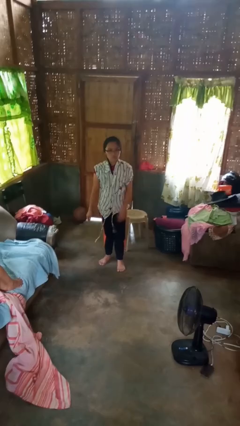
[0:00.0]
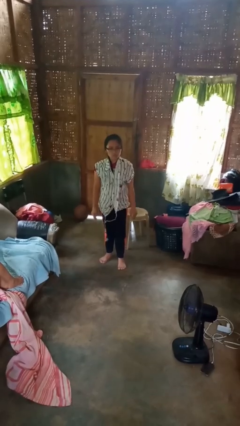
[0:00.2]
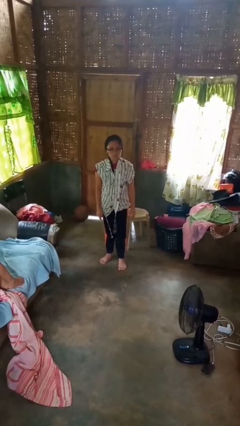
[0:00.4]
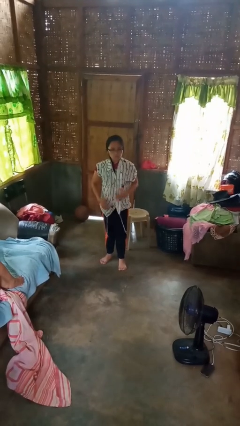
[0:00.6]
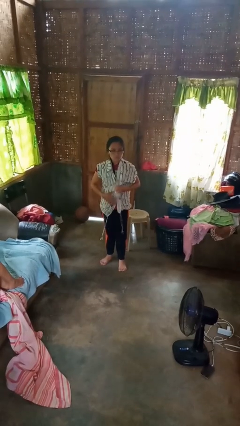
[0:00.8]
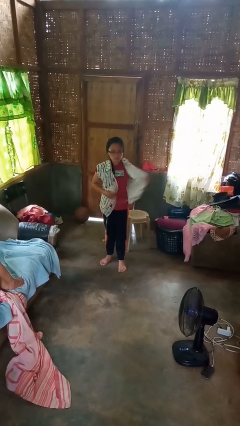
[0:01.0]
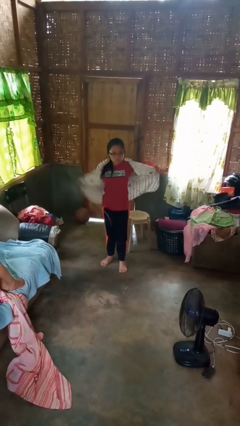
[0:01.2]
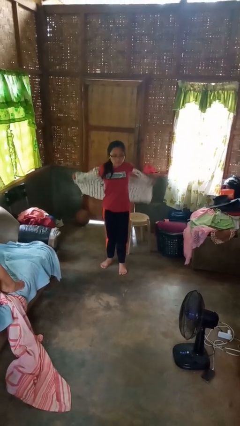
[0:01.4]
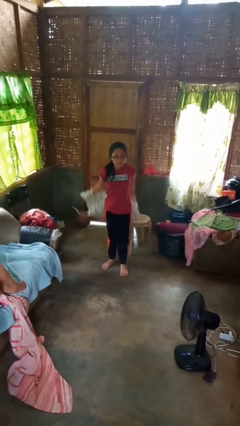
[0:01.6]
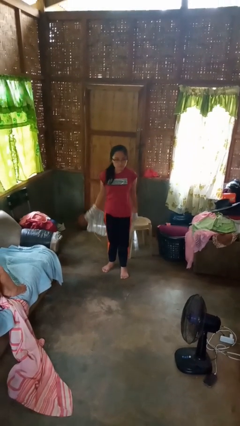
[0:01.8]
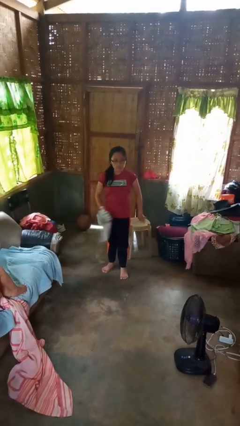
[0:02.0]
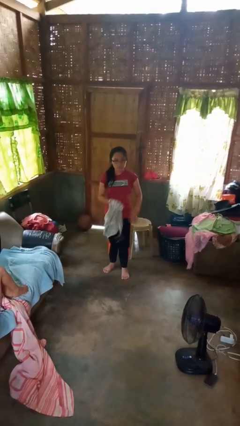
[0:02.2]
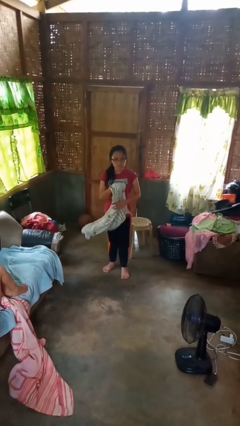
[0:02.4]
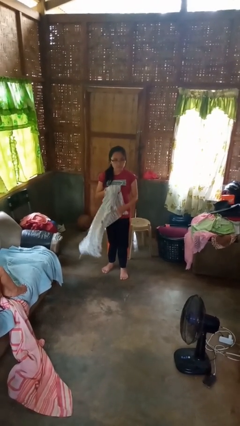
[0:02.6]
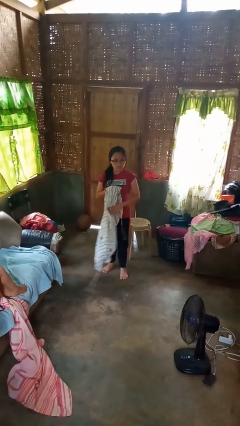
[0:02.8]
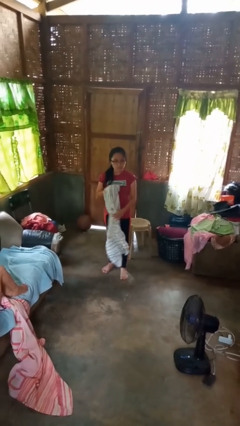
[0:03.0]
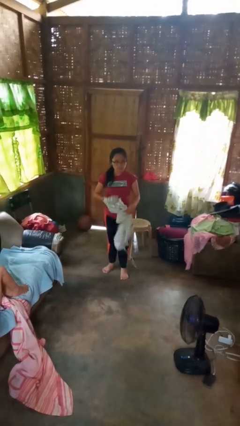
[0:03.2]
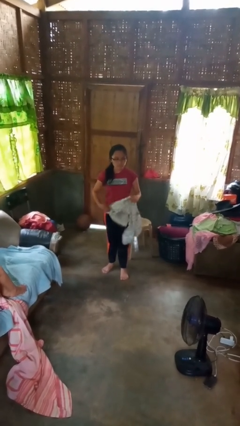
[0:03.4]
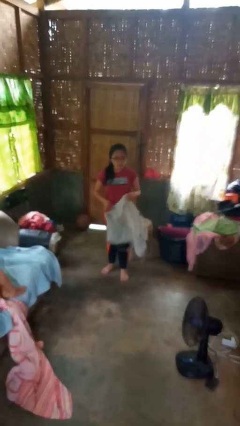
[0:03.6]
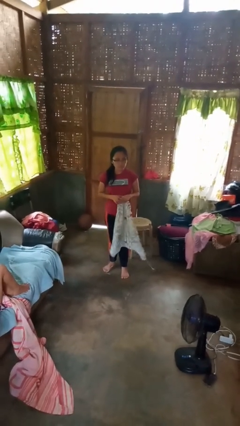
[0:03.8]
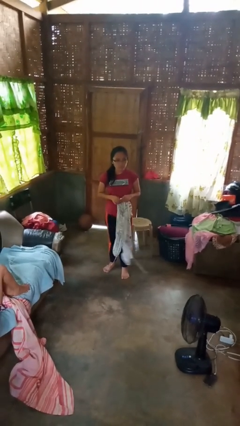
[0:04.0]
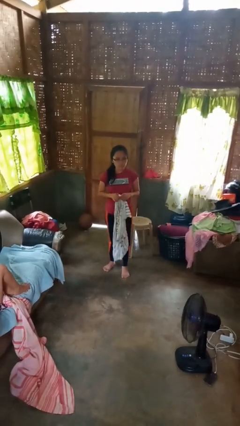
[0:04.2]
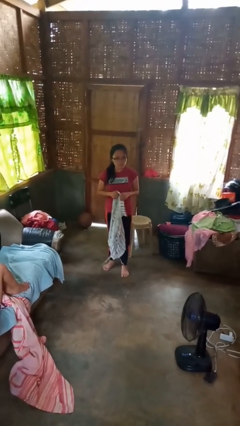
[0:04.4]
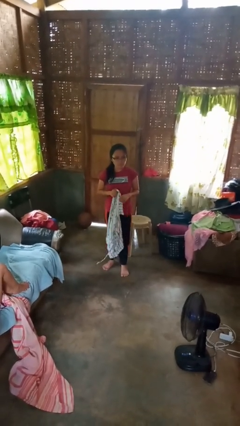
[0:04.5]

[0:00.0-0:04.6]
person takes off shirt

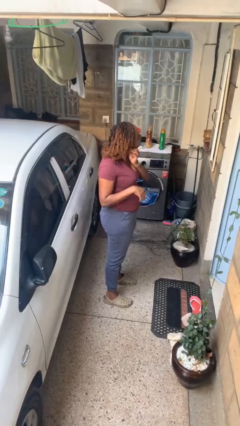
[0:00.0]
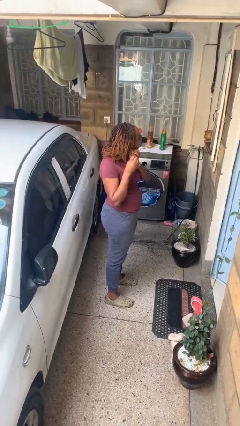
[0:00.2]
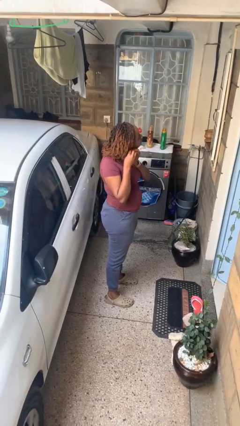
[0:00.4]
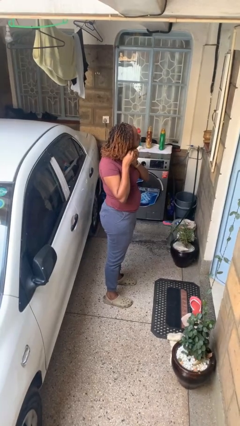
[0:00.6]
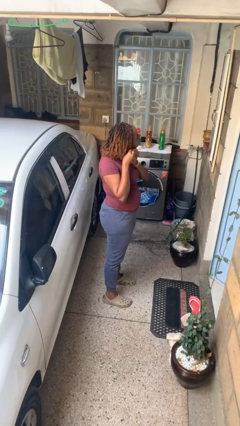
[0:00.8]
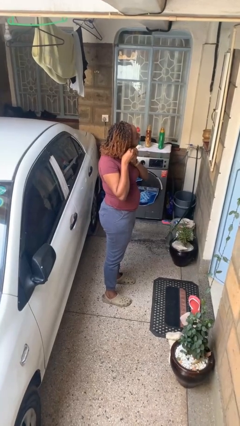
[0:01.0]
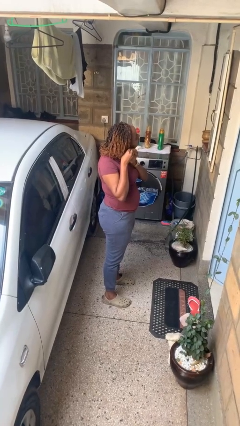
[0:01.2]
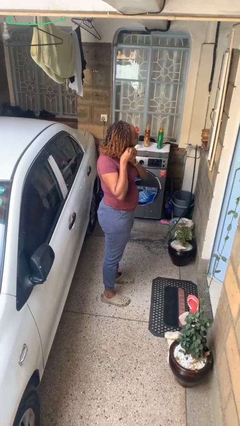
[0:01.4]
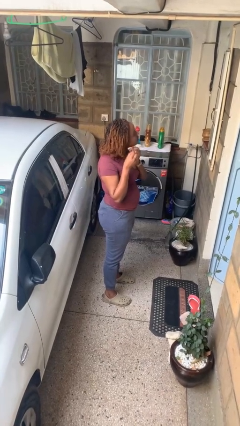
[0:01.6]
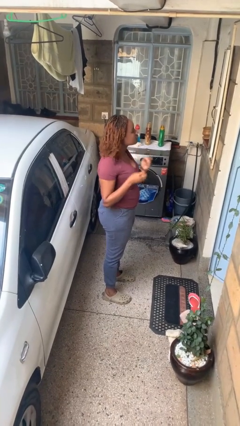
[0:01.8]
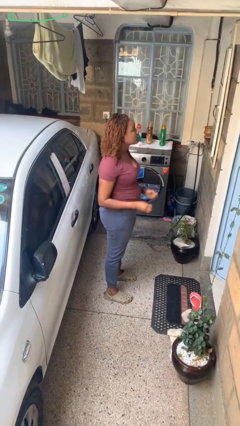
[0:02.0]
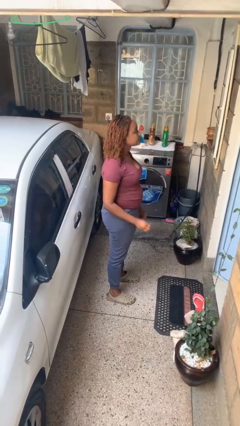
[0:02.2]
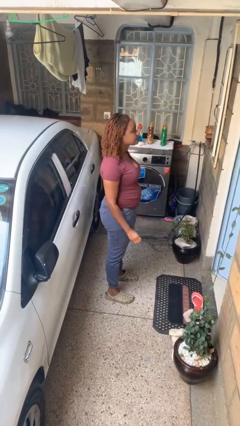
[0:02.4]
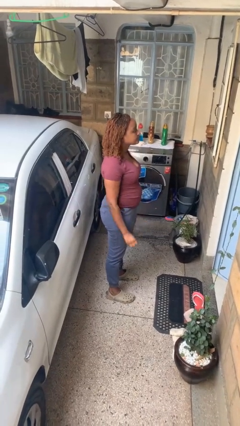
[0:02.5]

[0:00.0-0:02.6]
person takes off earrings

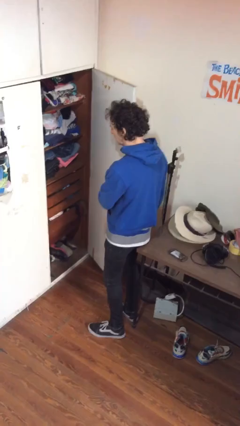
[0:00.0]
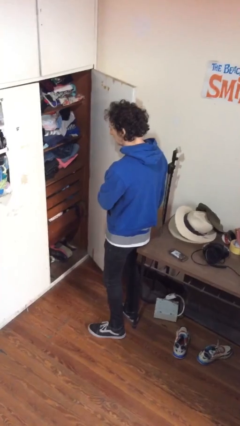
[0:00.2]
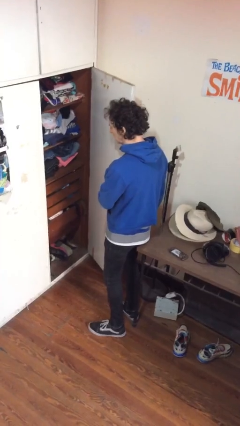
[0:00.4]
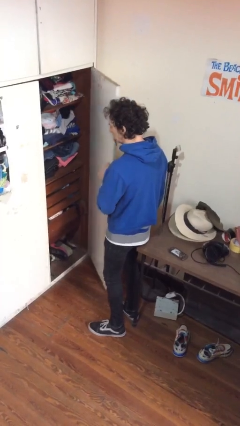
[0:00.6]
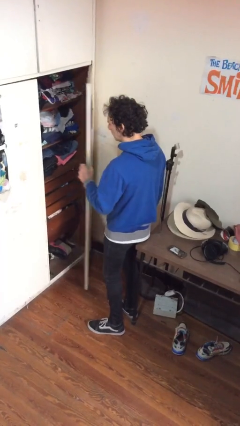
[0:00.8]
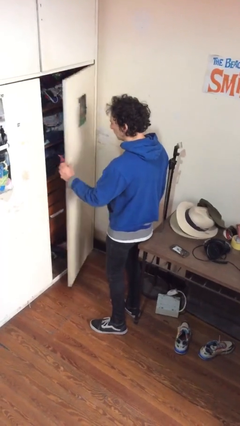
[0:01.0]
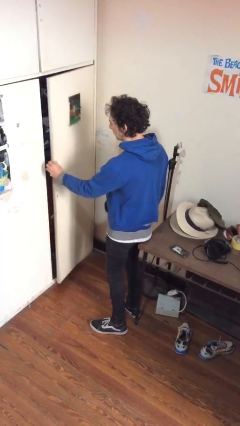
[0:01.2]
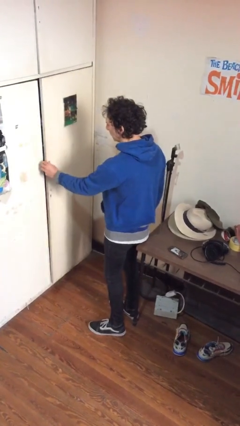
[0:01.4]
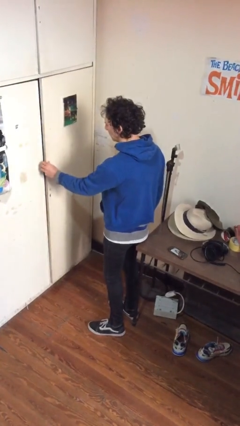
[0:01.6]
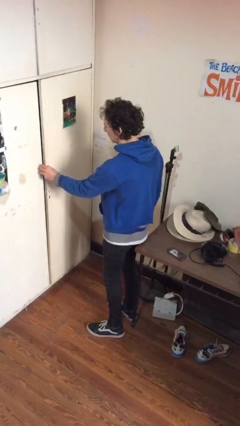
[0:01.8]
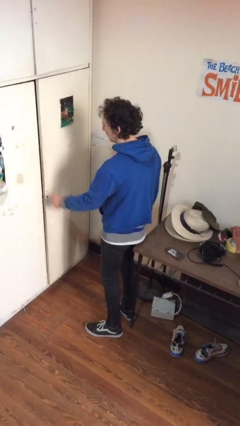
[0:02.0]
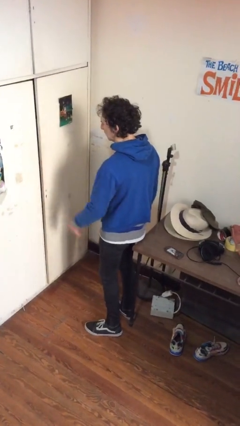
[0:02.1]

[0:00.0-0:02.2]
person closes closet door

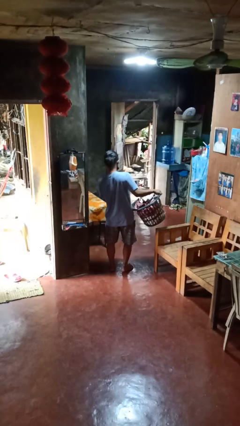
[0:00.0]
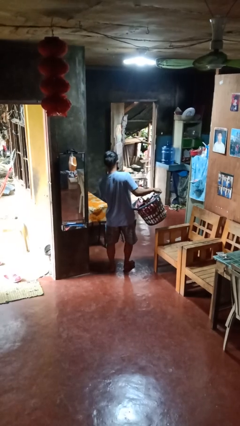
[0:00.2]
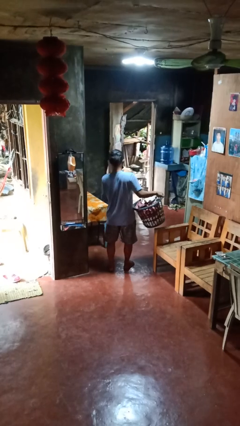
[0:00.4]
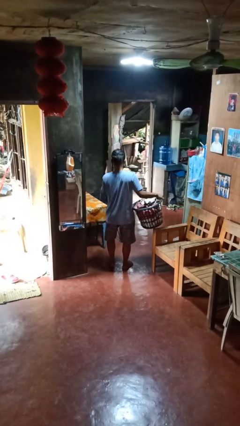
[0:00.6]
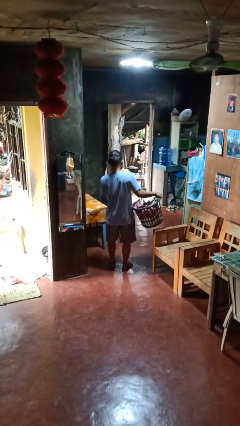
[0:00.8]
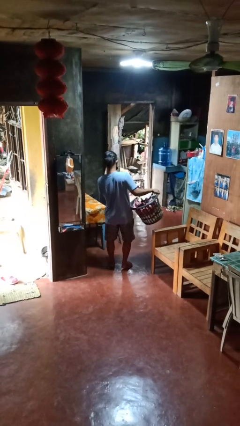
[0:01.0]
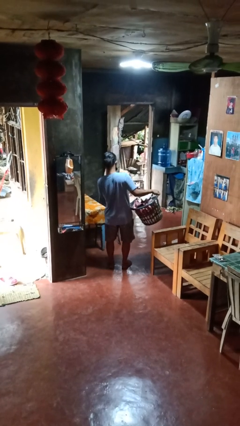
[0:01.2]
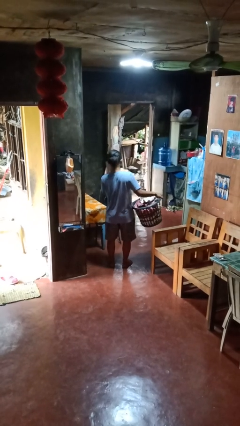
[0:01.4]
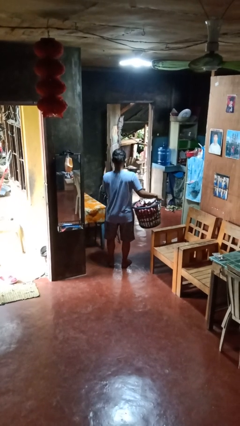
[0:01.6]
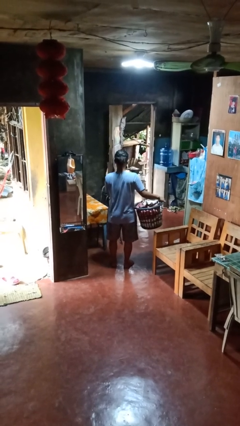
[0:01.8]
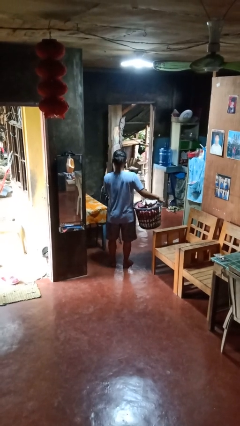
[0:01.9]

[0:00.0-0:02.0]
person carries laundry basket

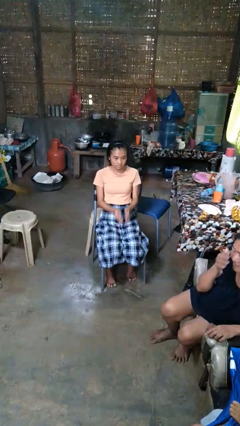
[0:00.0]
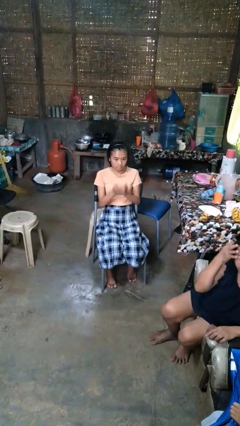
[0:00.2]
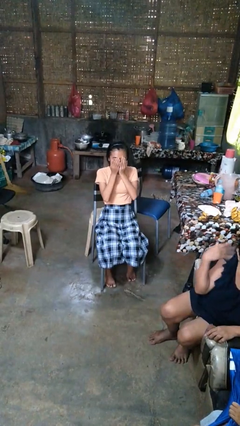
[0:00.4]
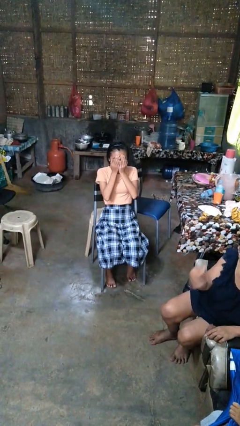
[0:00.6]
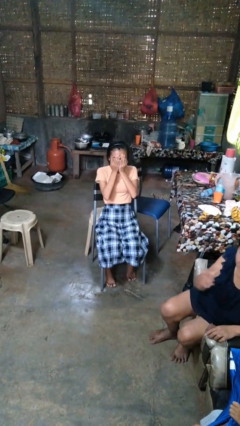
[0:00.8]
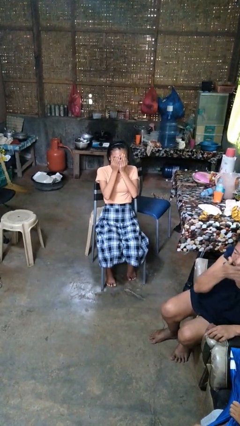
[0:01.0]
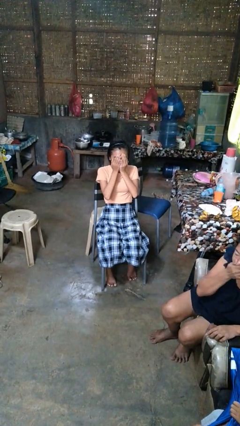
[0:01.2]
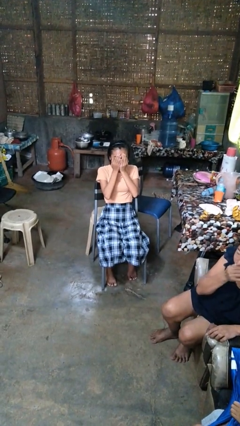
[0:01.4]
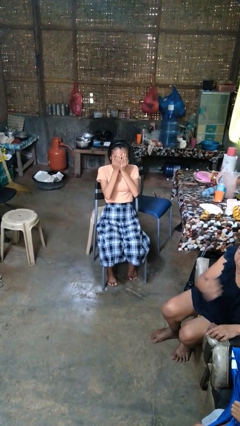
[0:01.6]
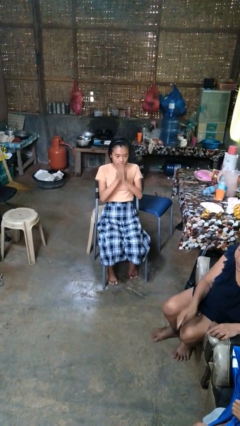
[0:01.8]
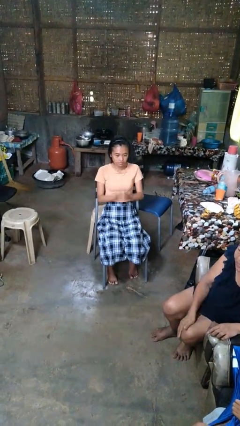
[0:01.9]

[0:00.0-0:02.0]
person covers face with hands

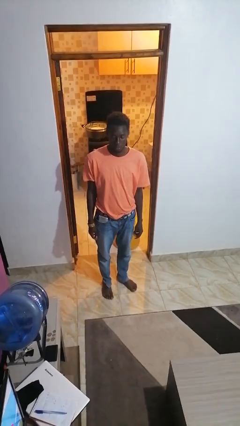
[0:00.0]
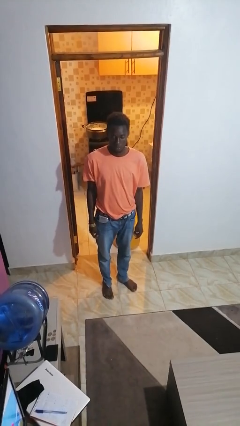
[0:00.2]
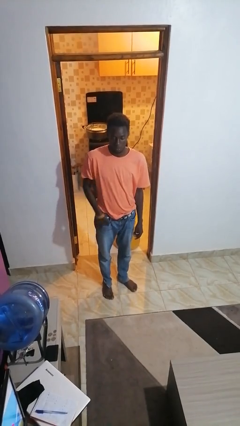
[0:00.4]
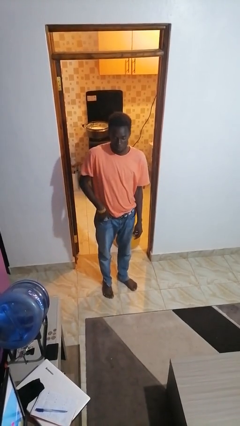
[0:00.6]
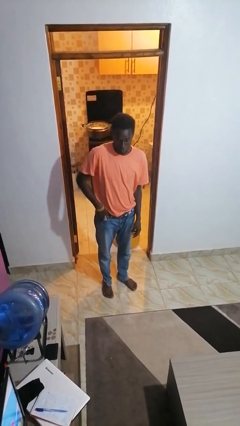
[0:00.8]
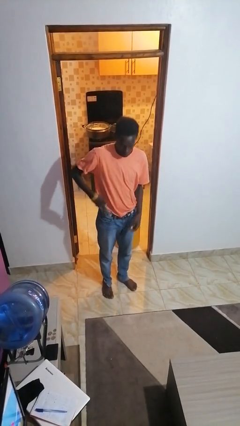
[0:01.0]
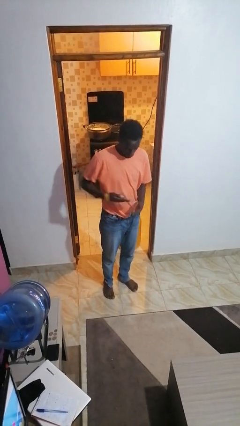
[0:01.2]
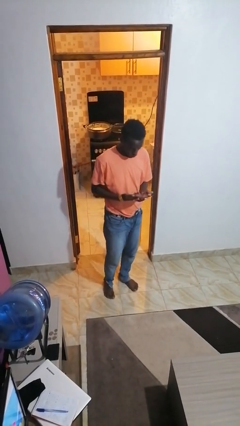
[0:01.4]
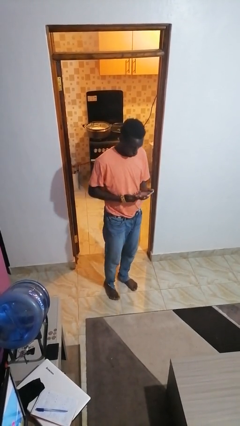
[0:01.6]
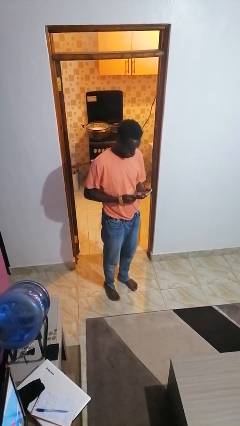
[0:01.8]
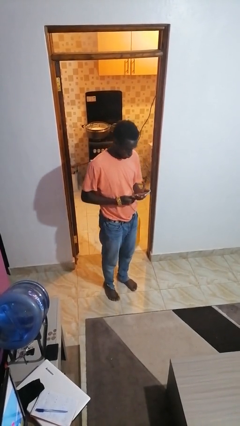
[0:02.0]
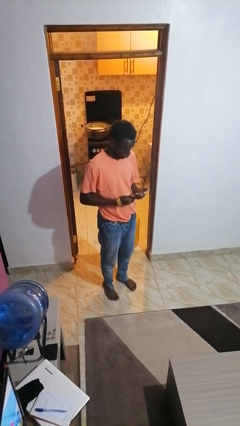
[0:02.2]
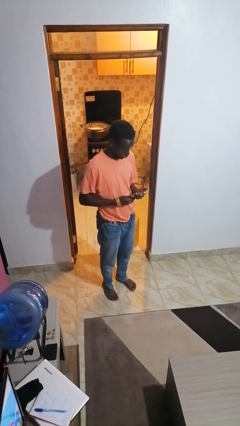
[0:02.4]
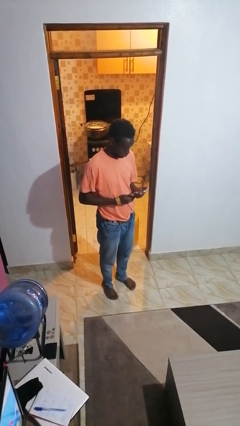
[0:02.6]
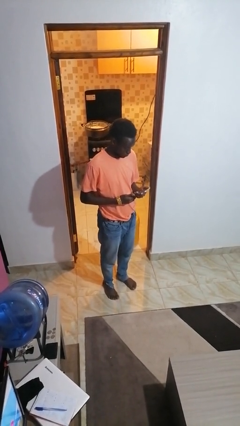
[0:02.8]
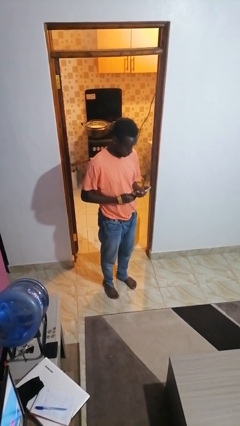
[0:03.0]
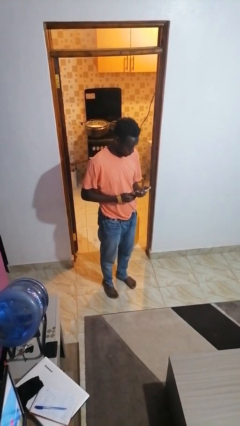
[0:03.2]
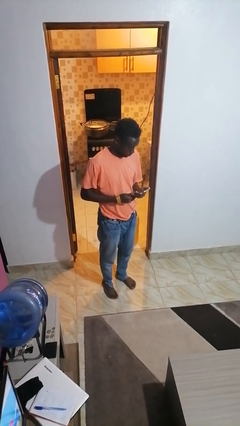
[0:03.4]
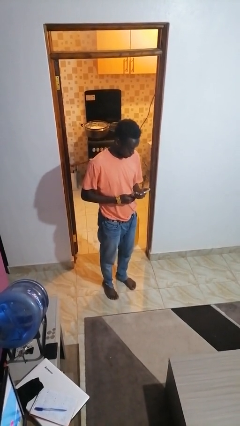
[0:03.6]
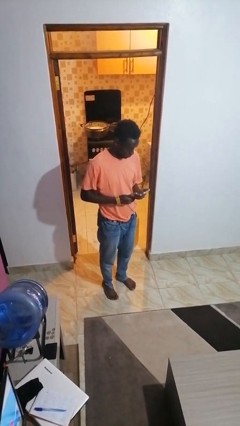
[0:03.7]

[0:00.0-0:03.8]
person takes phone from pocket
